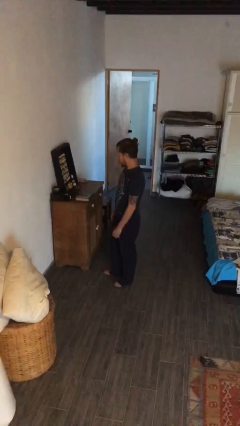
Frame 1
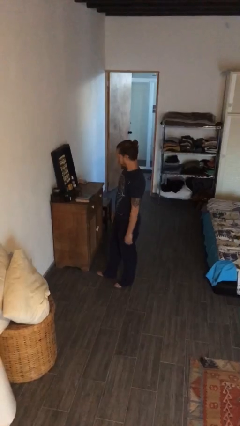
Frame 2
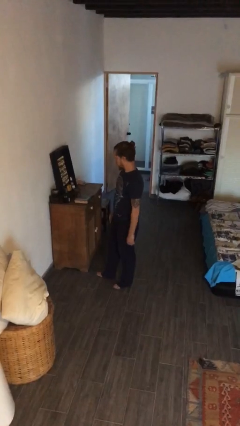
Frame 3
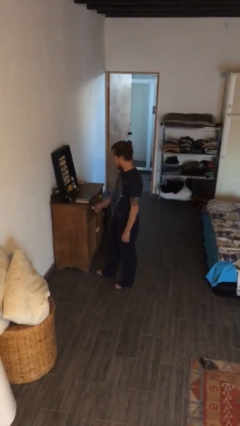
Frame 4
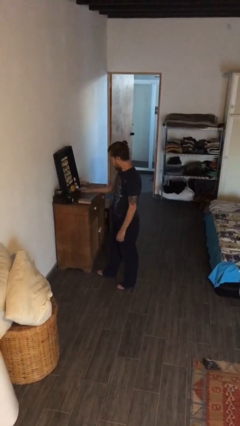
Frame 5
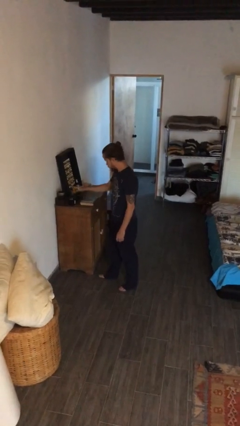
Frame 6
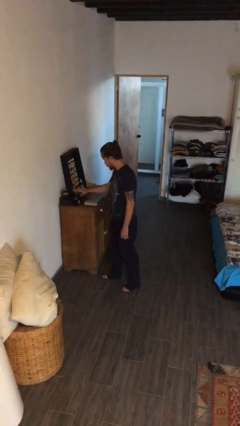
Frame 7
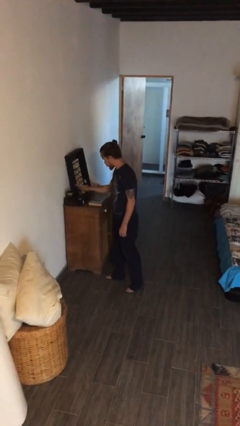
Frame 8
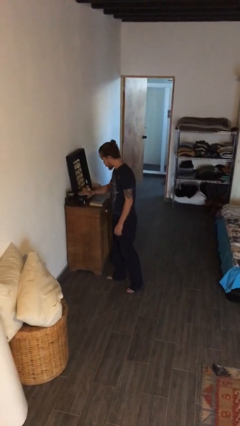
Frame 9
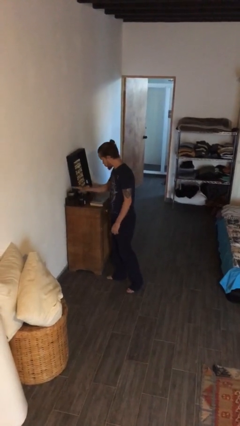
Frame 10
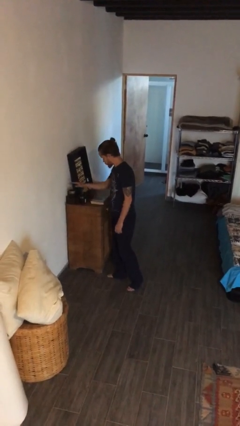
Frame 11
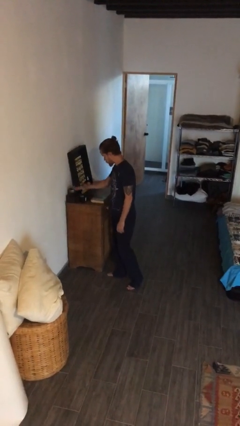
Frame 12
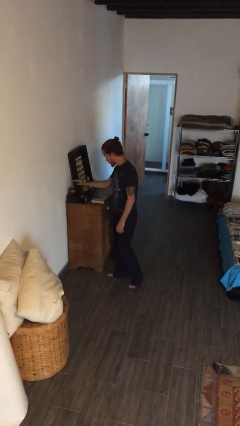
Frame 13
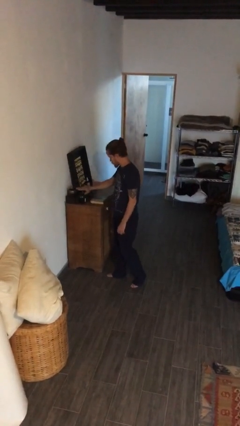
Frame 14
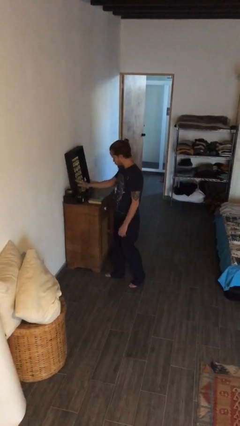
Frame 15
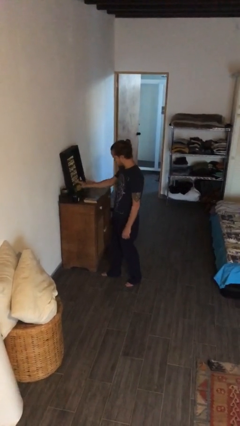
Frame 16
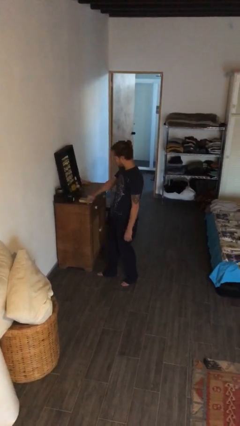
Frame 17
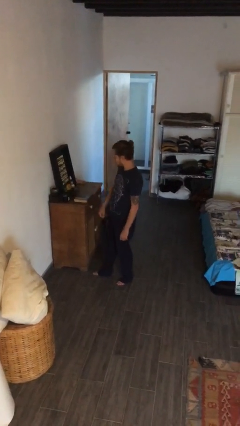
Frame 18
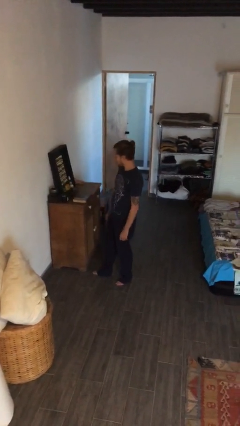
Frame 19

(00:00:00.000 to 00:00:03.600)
person waves hand over object

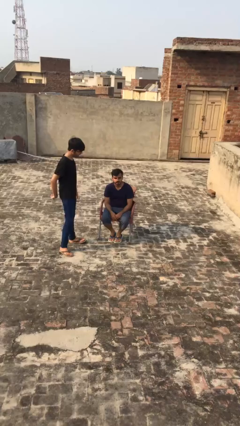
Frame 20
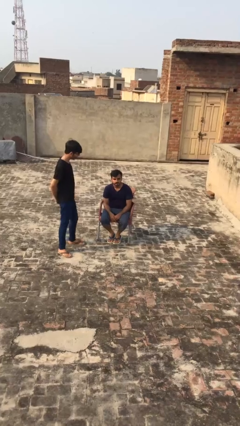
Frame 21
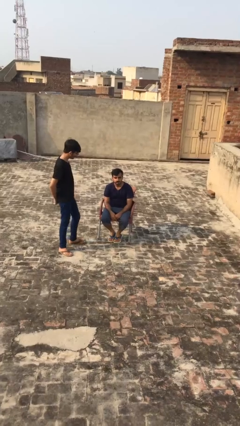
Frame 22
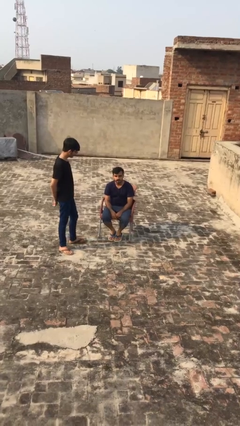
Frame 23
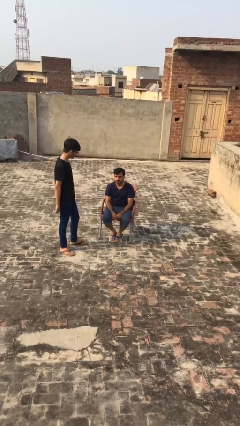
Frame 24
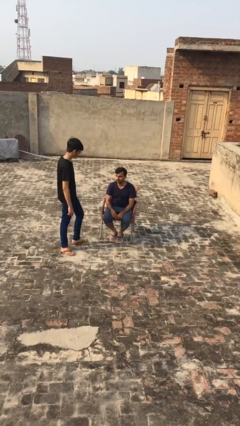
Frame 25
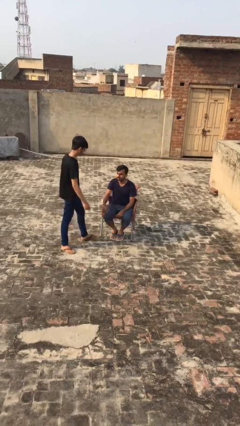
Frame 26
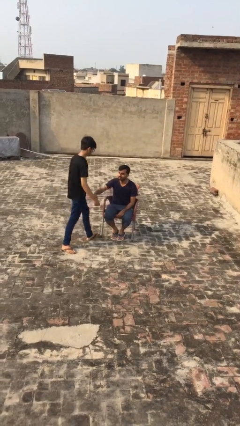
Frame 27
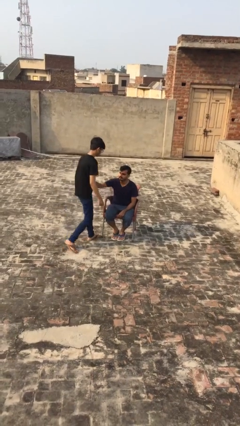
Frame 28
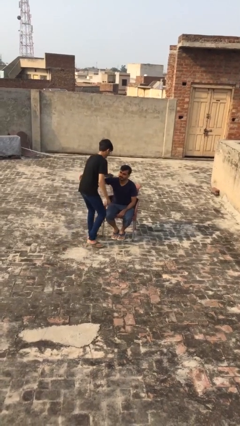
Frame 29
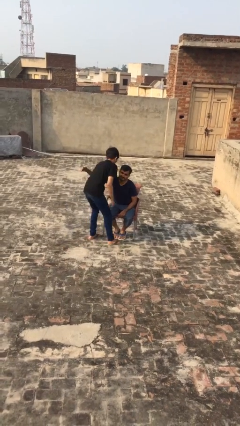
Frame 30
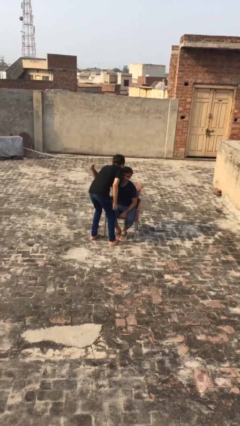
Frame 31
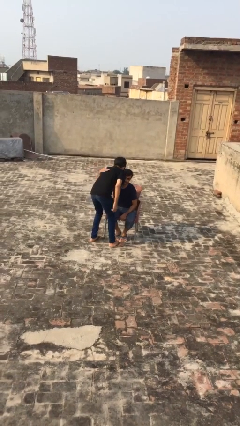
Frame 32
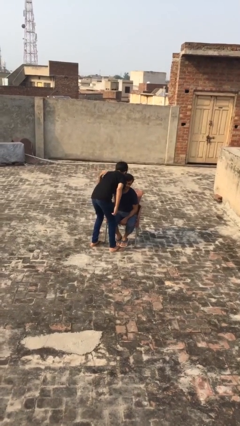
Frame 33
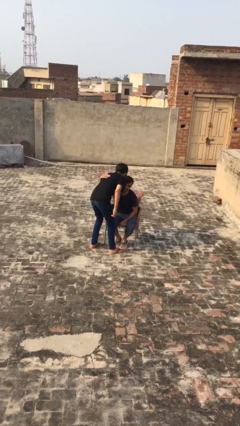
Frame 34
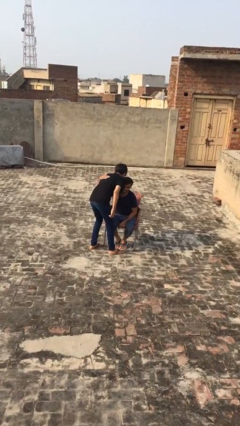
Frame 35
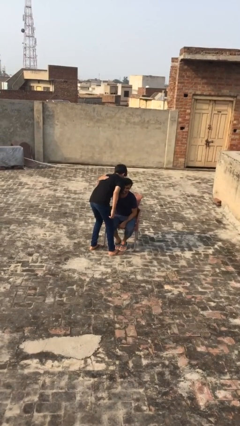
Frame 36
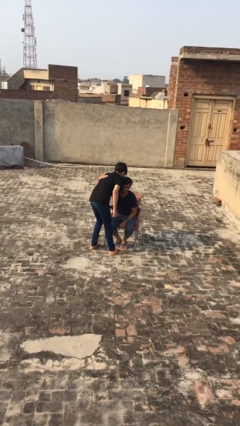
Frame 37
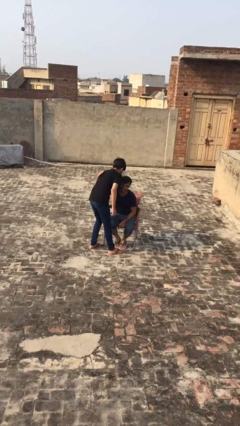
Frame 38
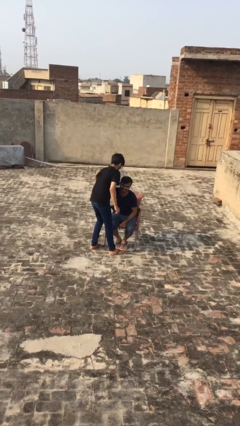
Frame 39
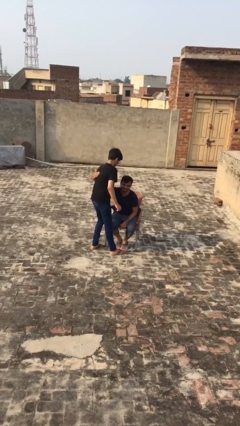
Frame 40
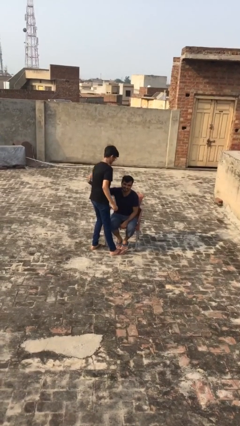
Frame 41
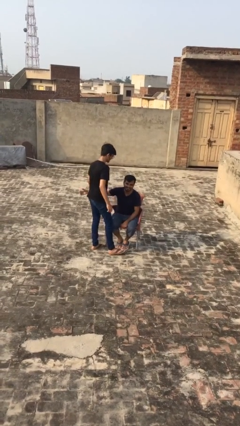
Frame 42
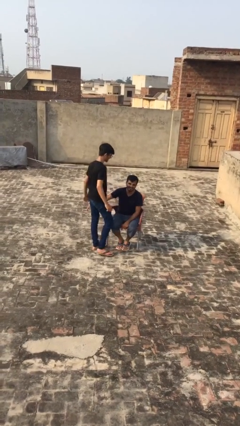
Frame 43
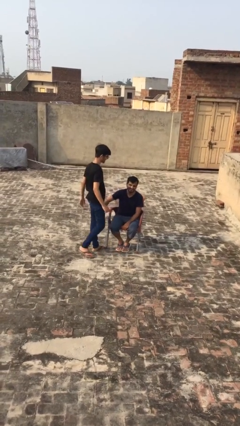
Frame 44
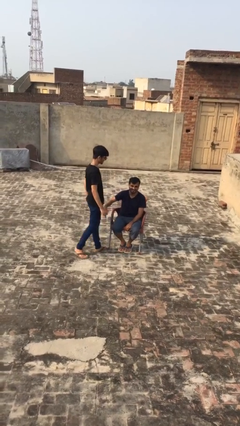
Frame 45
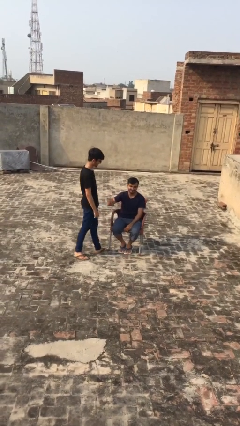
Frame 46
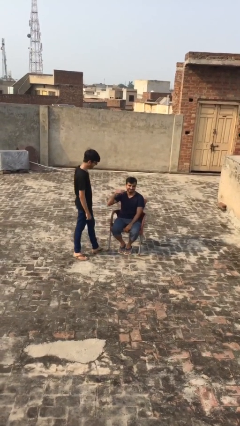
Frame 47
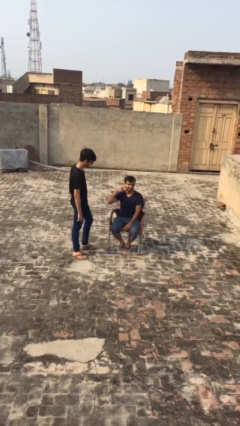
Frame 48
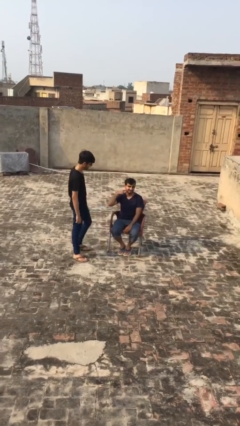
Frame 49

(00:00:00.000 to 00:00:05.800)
person embraces person

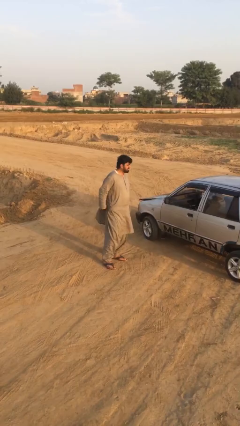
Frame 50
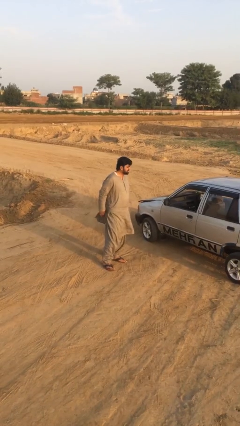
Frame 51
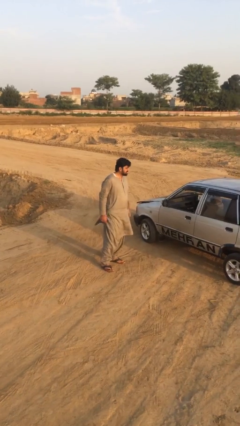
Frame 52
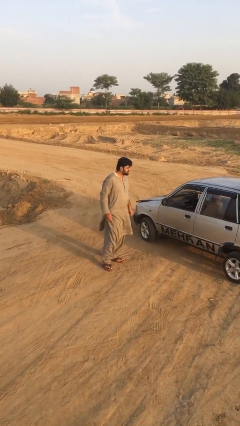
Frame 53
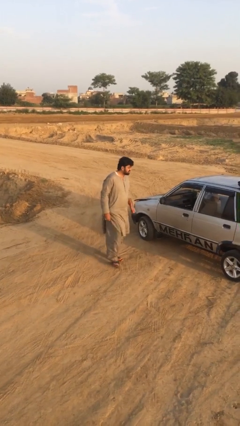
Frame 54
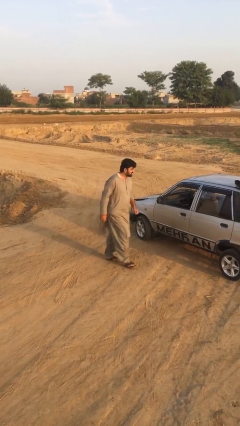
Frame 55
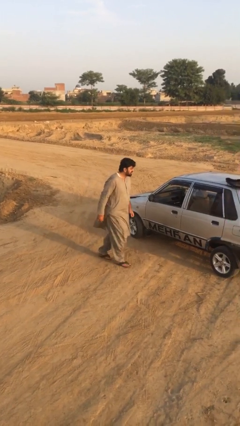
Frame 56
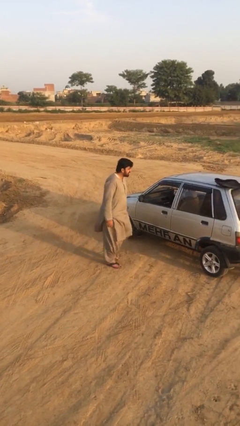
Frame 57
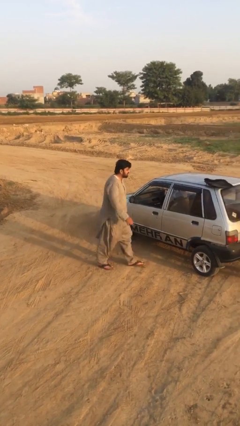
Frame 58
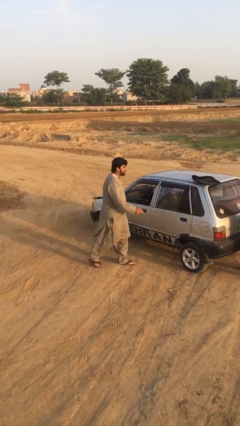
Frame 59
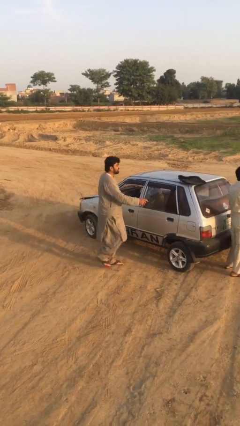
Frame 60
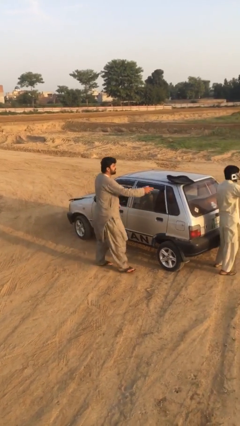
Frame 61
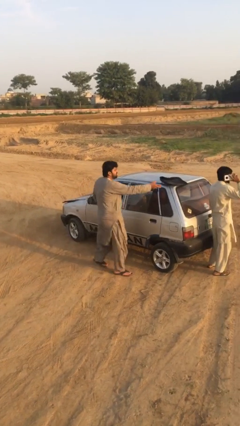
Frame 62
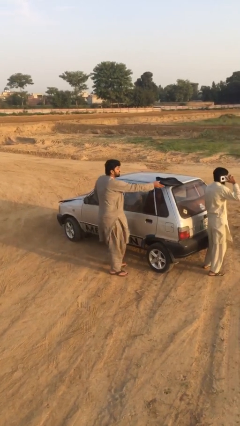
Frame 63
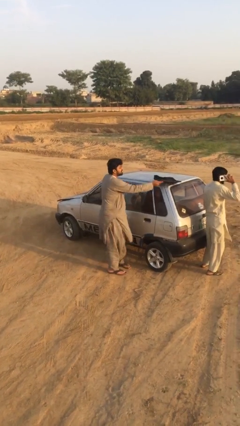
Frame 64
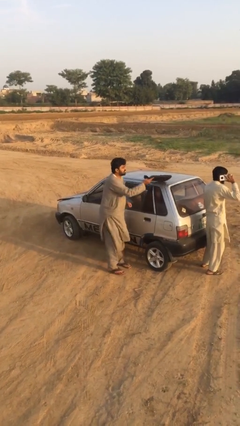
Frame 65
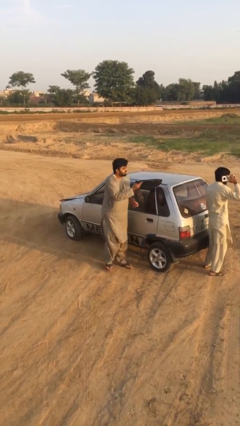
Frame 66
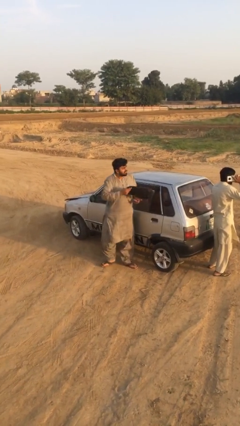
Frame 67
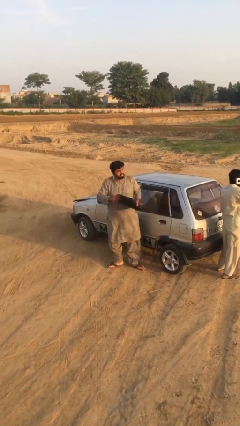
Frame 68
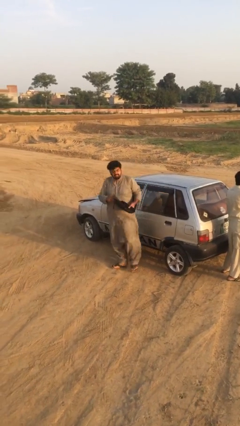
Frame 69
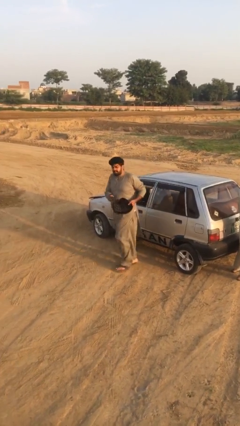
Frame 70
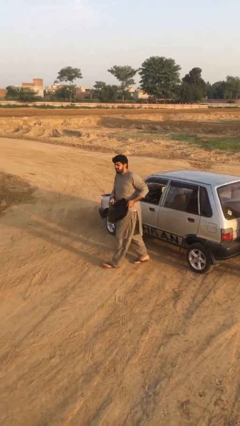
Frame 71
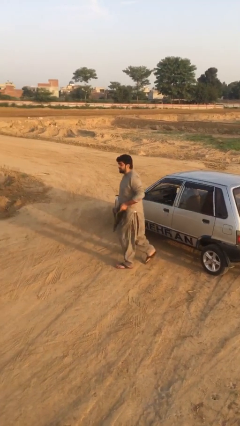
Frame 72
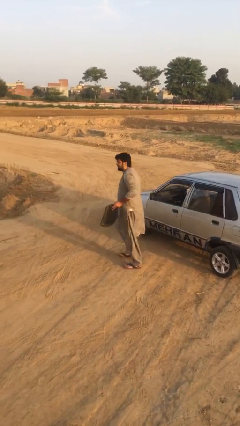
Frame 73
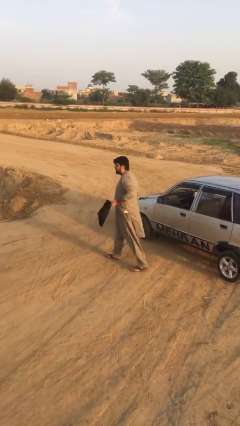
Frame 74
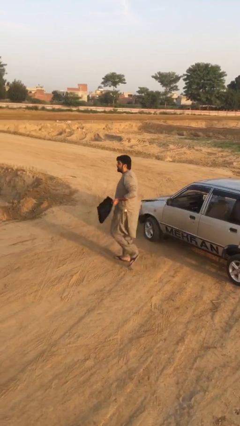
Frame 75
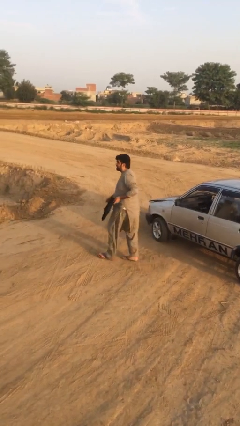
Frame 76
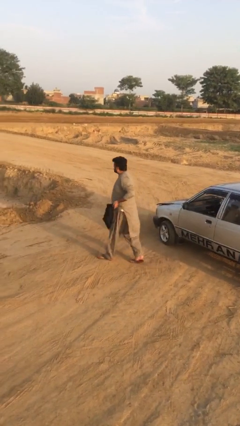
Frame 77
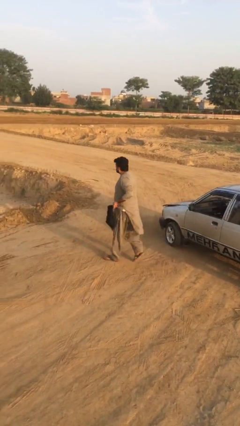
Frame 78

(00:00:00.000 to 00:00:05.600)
person steals object from person

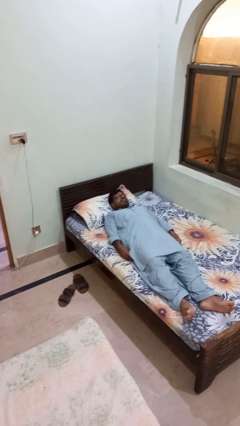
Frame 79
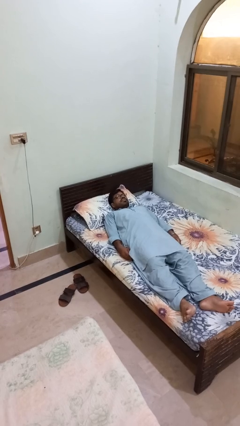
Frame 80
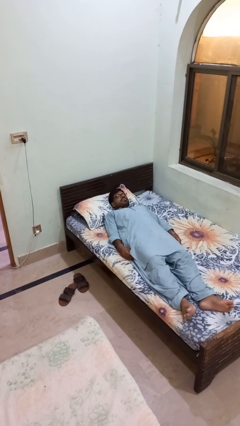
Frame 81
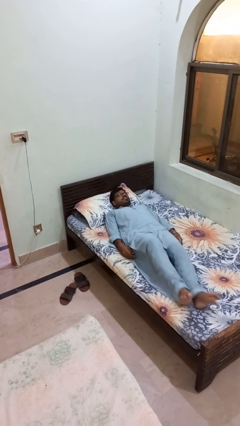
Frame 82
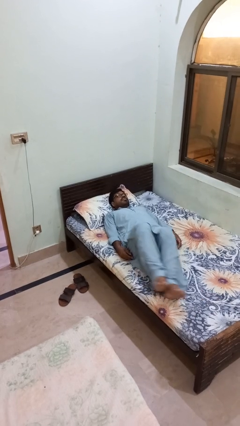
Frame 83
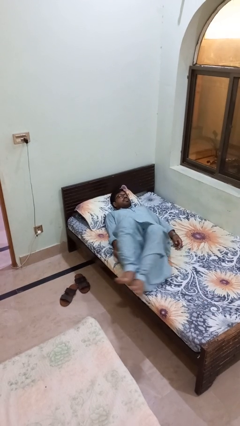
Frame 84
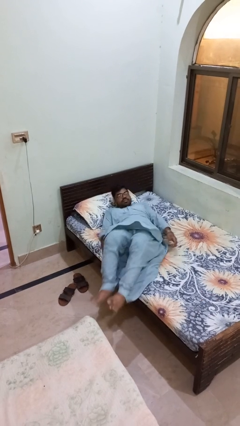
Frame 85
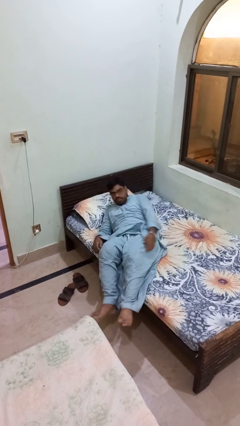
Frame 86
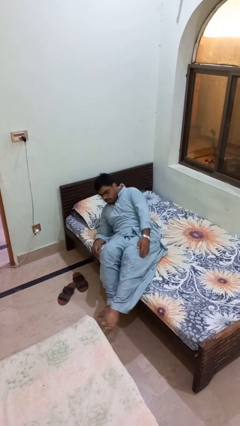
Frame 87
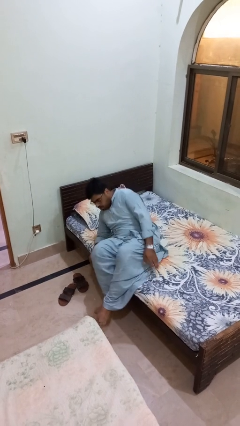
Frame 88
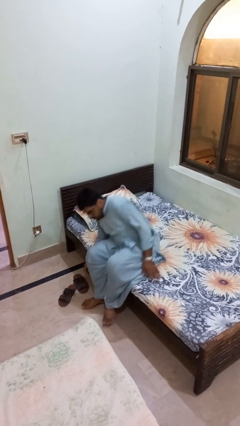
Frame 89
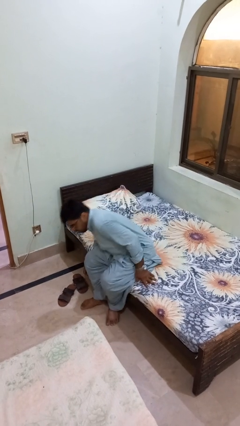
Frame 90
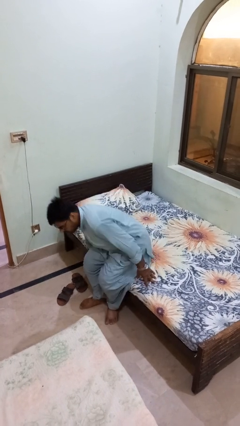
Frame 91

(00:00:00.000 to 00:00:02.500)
person stands up
